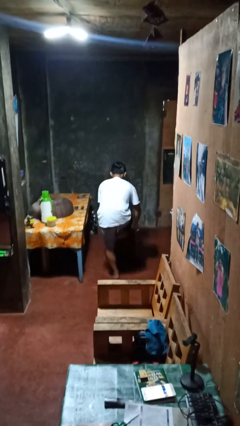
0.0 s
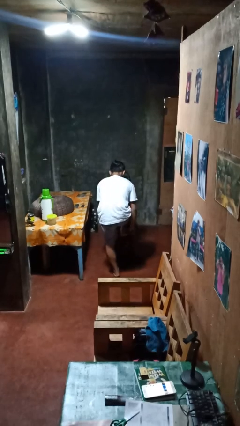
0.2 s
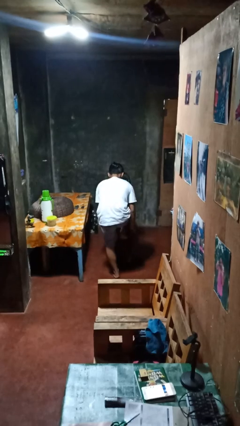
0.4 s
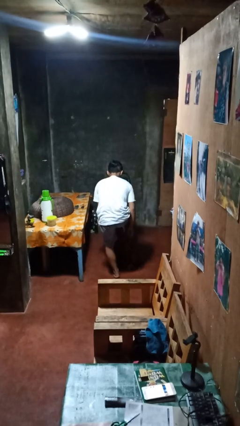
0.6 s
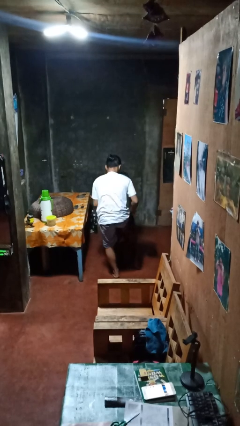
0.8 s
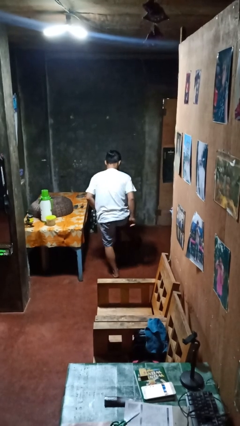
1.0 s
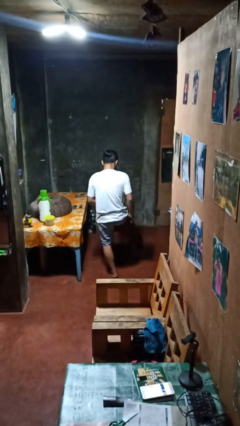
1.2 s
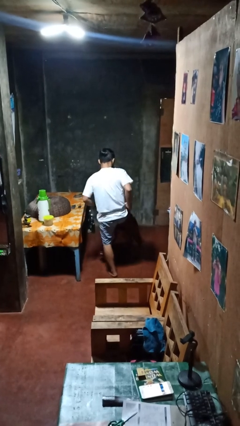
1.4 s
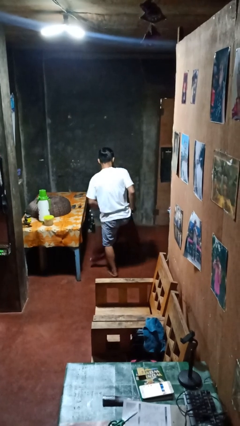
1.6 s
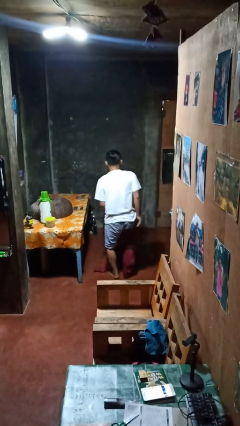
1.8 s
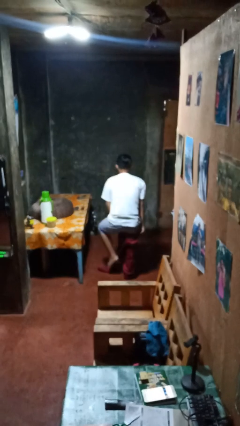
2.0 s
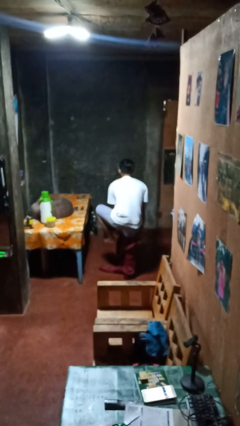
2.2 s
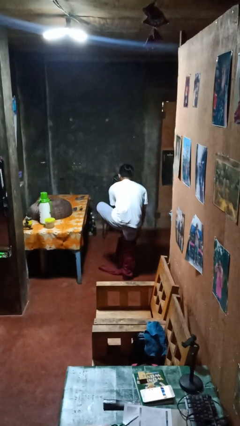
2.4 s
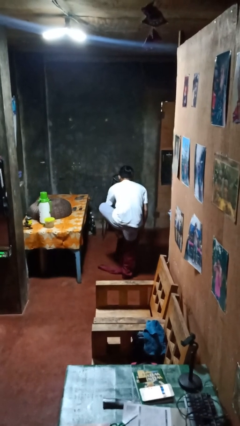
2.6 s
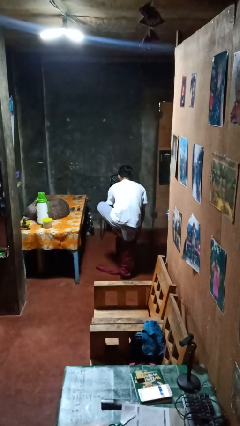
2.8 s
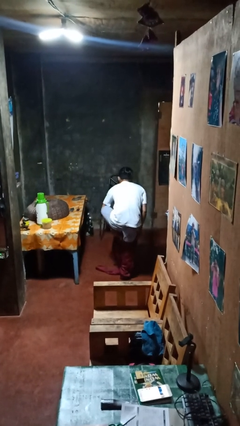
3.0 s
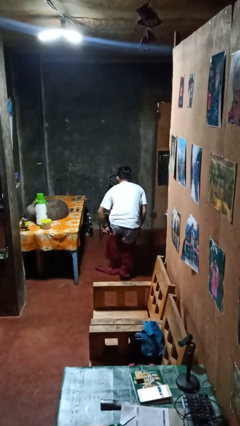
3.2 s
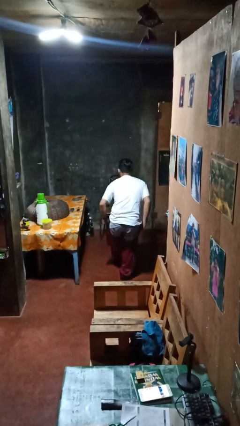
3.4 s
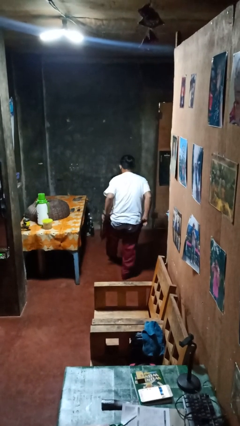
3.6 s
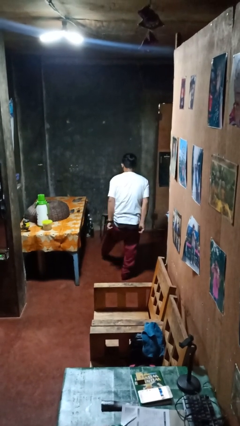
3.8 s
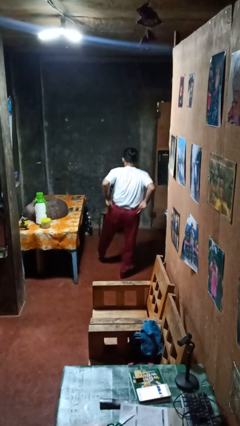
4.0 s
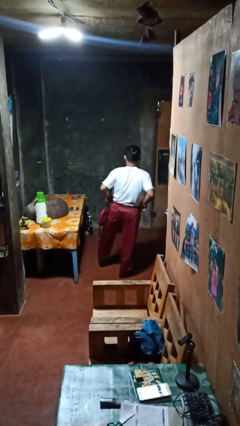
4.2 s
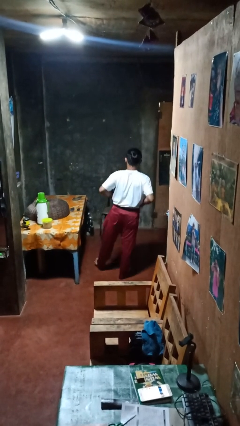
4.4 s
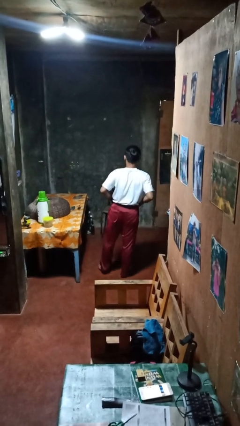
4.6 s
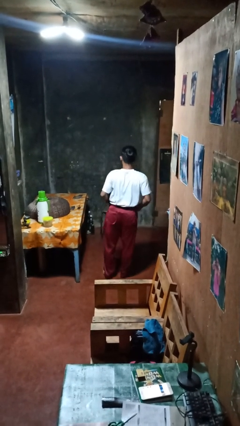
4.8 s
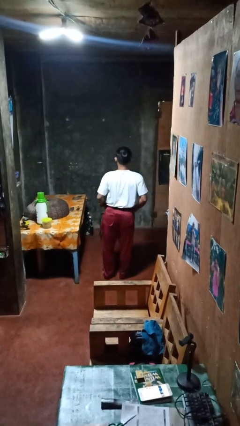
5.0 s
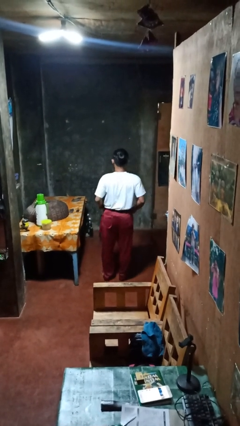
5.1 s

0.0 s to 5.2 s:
person puts on pants

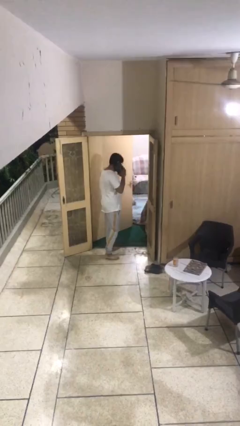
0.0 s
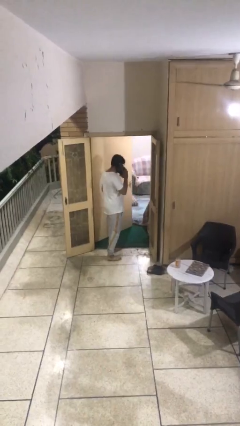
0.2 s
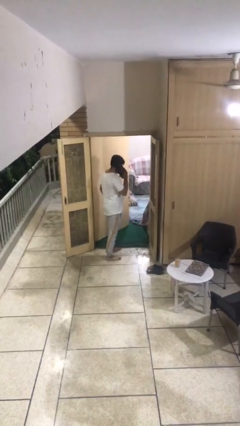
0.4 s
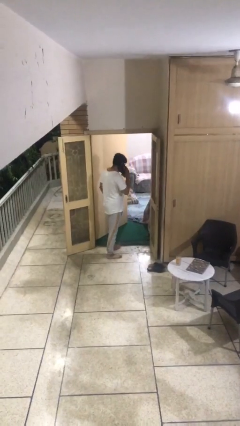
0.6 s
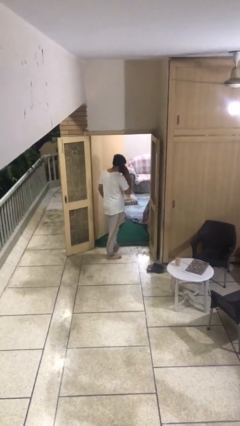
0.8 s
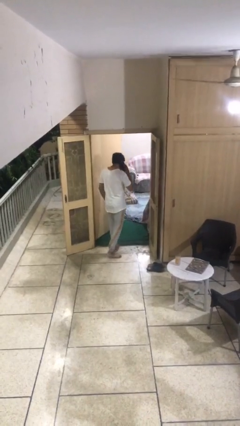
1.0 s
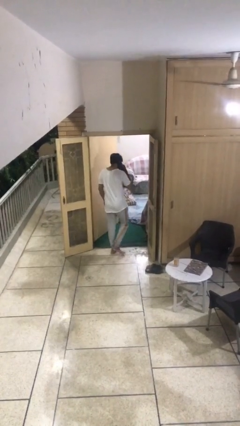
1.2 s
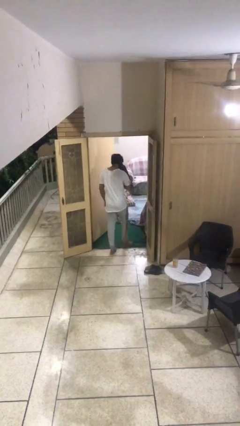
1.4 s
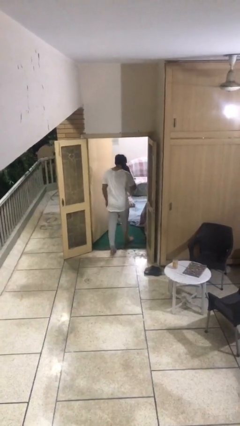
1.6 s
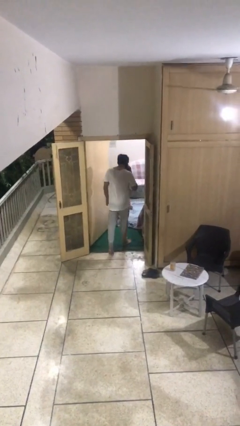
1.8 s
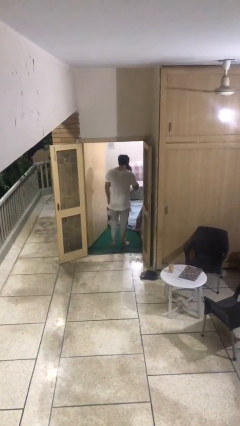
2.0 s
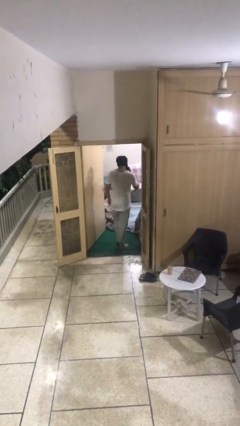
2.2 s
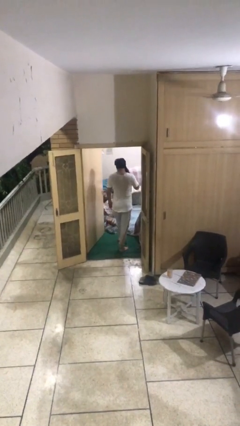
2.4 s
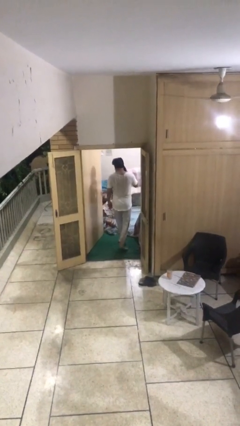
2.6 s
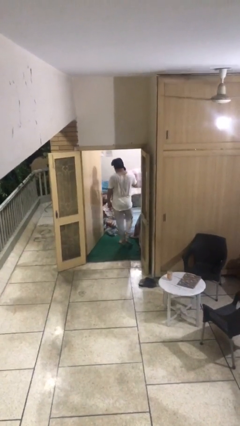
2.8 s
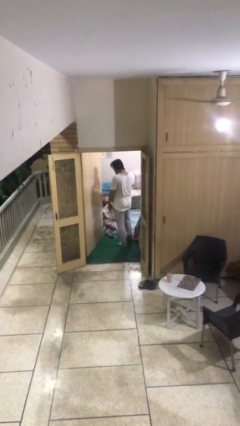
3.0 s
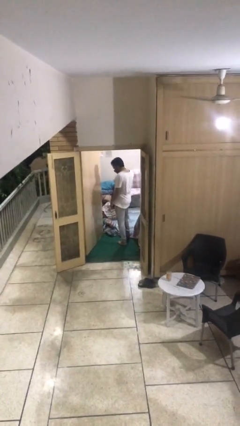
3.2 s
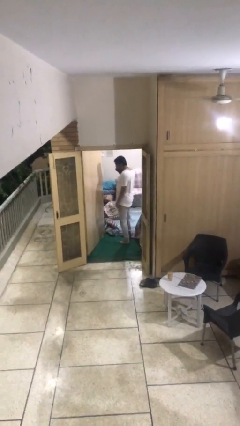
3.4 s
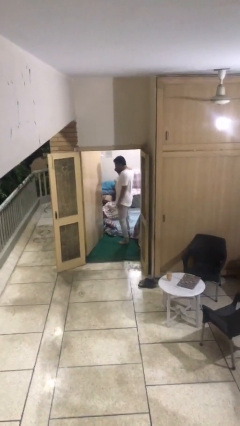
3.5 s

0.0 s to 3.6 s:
person exits scene through structure

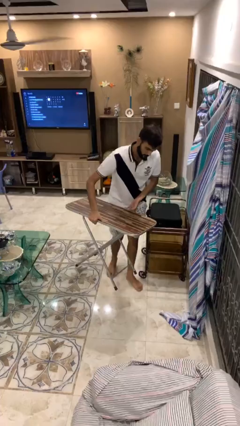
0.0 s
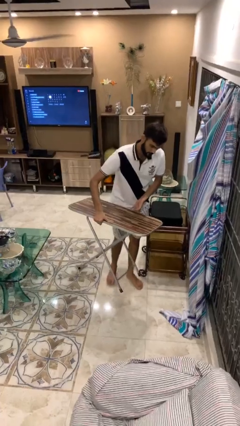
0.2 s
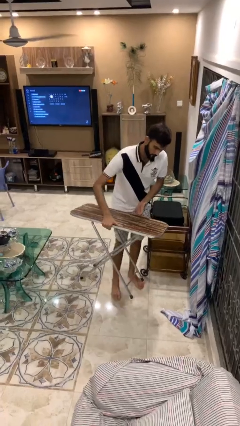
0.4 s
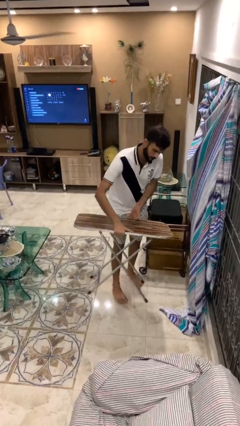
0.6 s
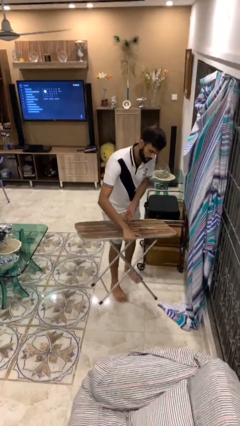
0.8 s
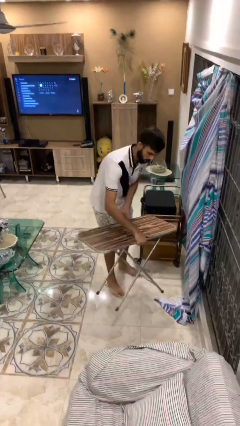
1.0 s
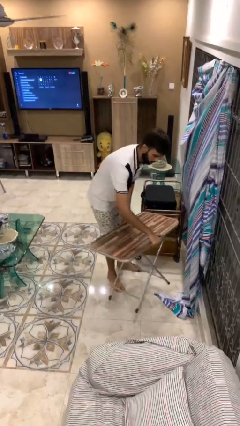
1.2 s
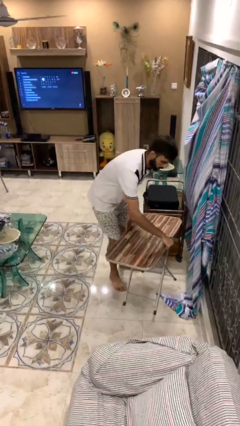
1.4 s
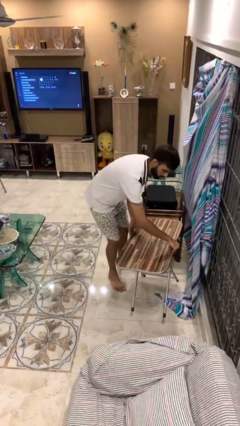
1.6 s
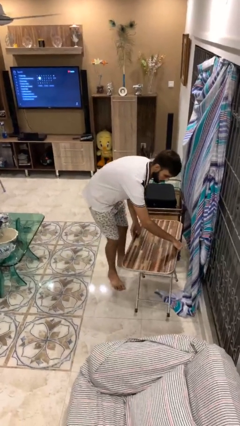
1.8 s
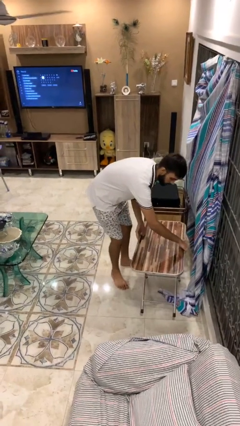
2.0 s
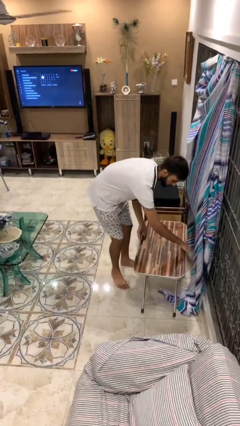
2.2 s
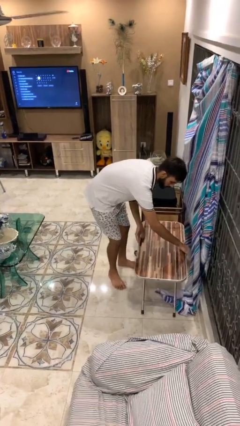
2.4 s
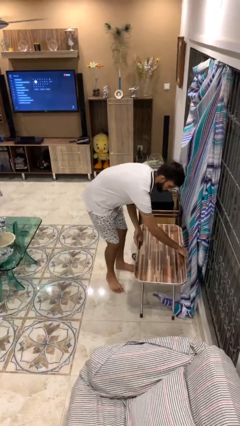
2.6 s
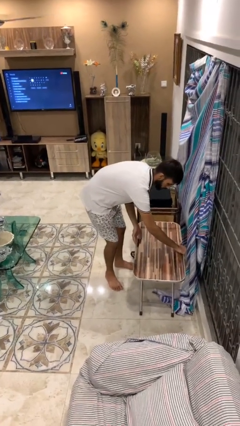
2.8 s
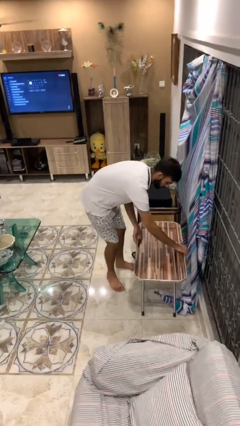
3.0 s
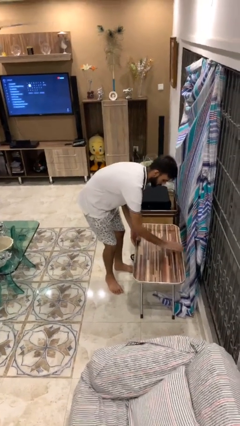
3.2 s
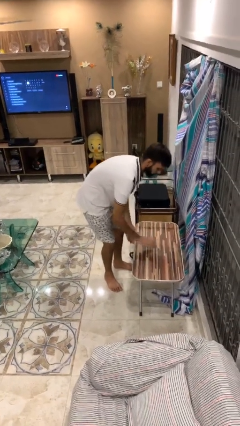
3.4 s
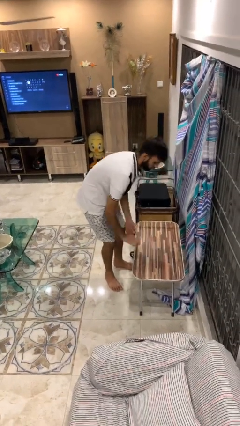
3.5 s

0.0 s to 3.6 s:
person puts down object on floor

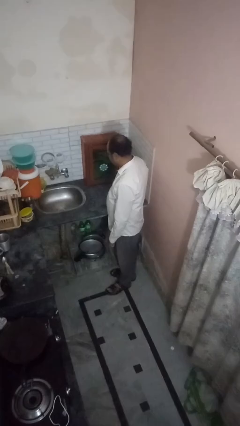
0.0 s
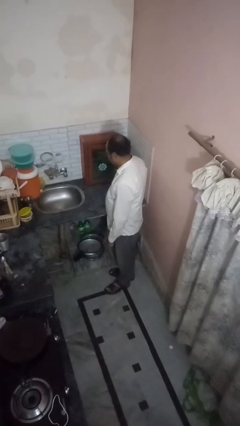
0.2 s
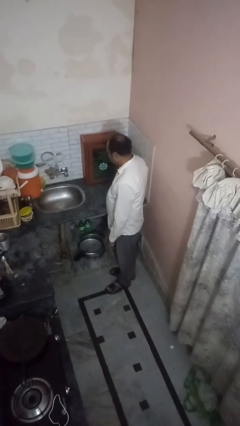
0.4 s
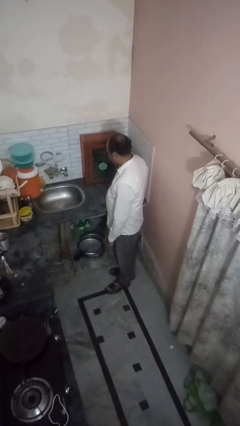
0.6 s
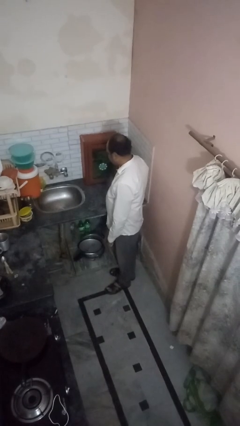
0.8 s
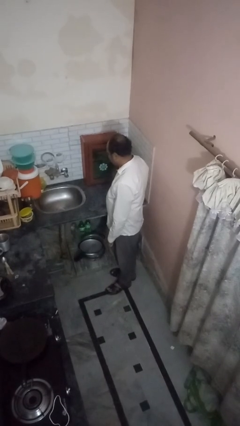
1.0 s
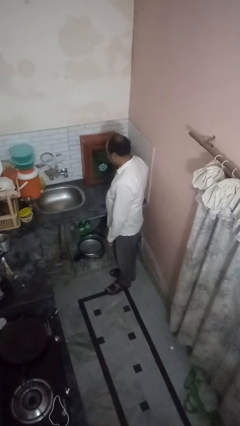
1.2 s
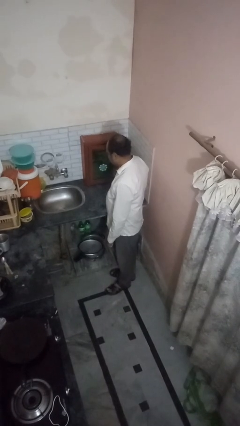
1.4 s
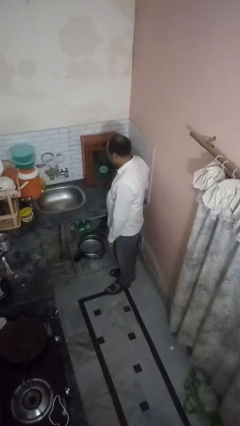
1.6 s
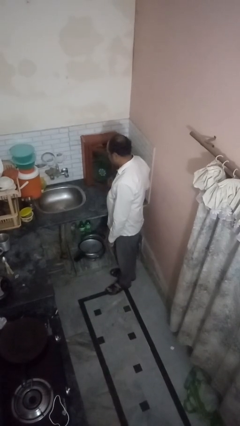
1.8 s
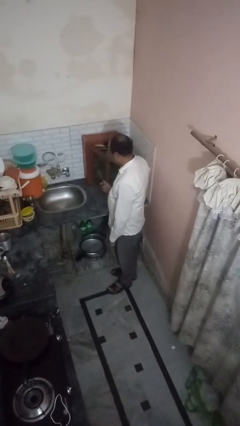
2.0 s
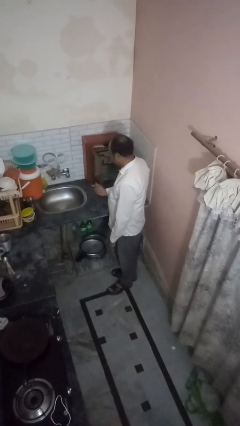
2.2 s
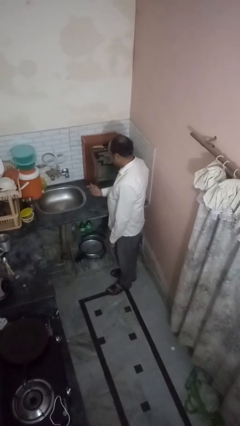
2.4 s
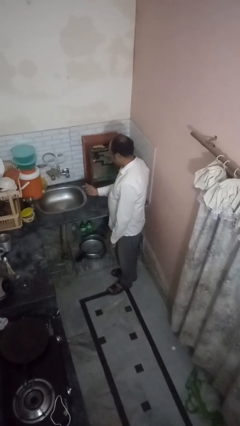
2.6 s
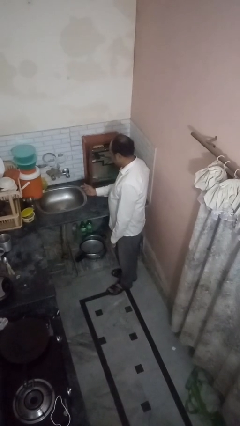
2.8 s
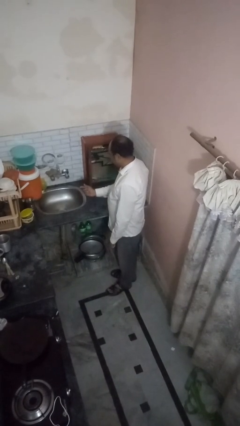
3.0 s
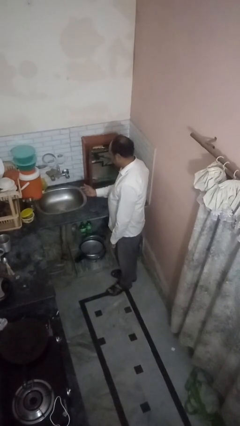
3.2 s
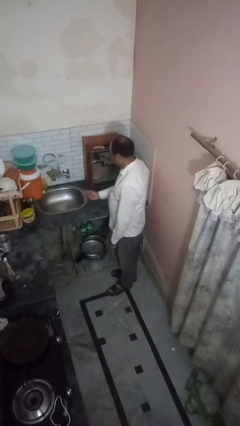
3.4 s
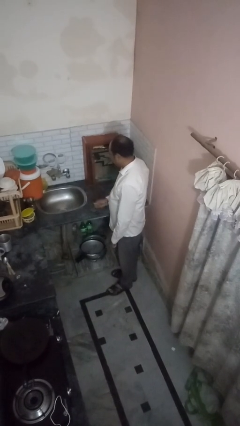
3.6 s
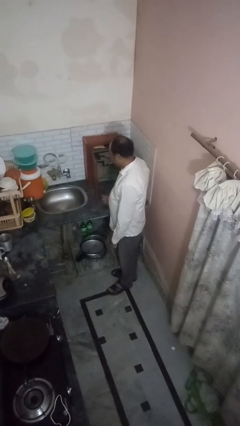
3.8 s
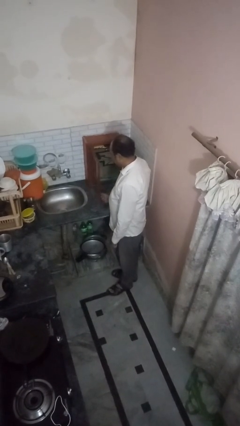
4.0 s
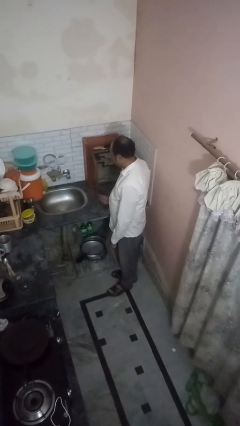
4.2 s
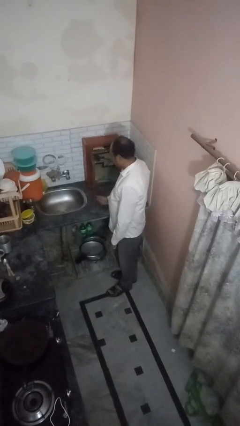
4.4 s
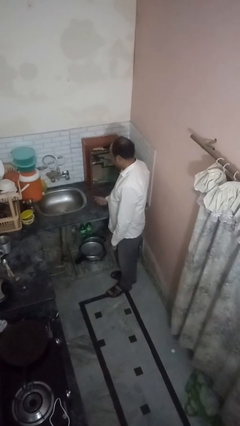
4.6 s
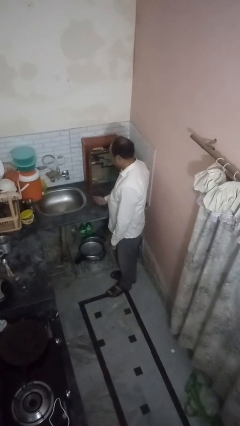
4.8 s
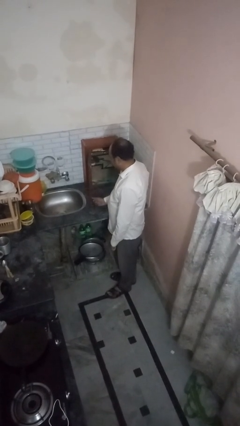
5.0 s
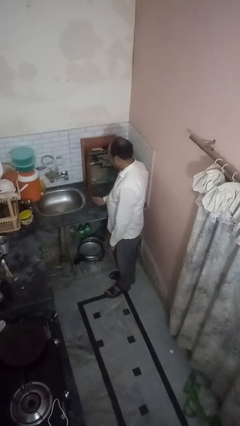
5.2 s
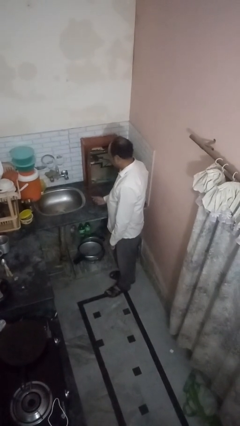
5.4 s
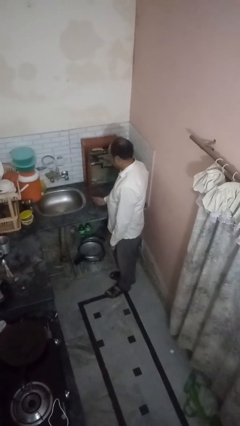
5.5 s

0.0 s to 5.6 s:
person opens kitchen drawer

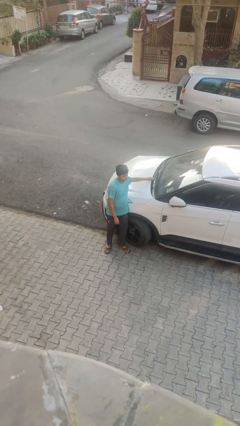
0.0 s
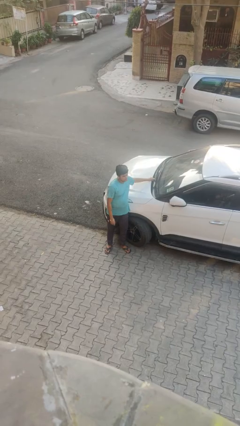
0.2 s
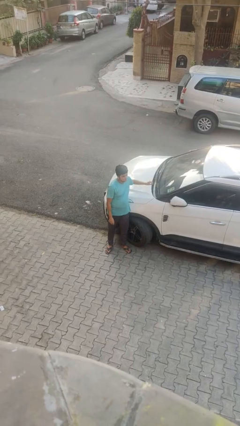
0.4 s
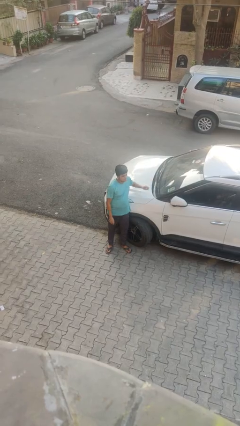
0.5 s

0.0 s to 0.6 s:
person flips down car wipers
